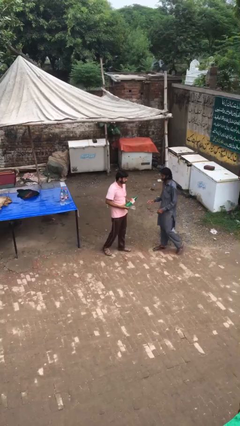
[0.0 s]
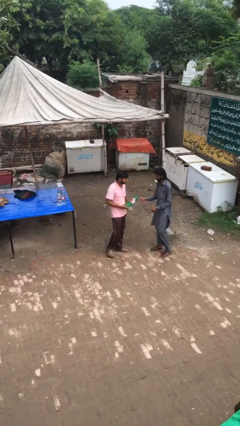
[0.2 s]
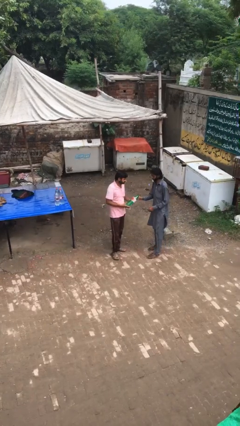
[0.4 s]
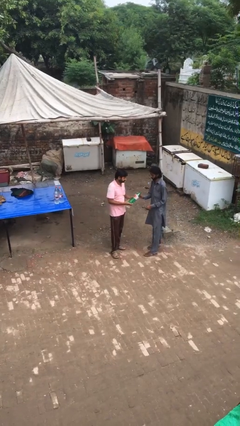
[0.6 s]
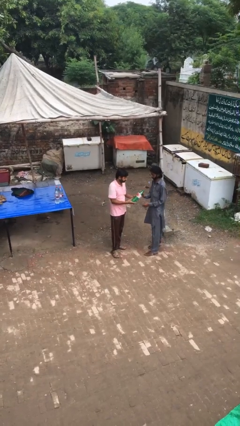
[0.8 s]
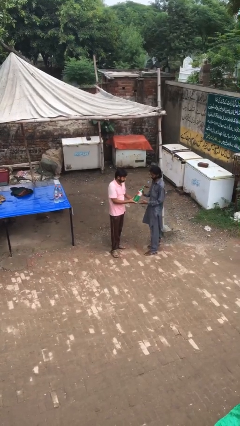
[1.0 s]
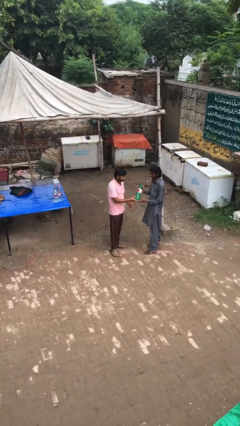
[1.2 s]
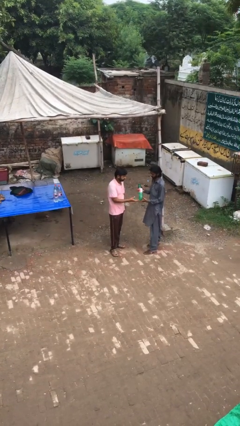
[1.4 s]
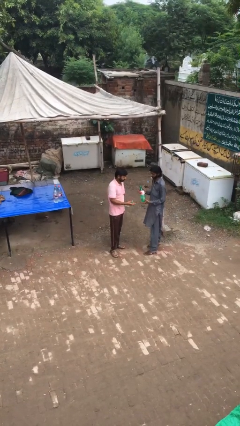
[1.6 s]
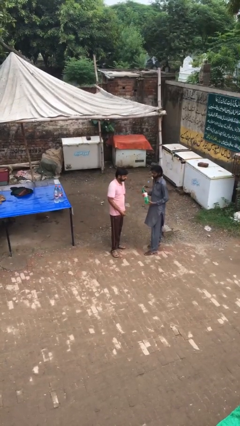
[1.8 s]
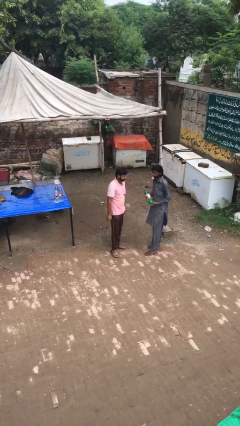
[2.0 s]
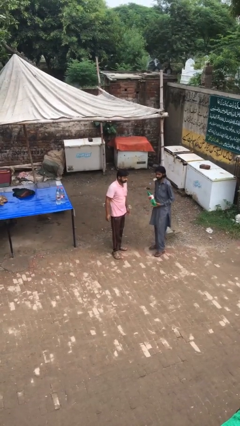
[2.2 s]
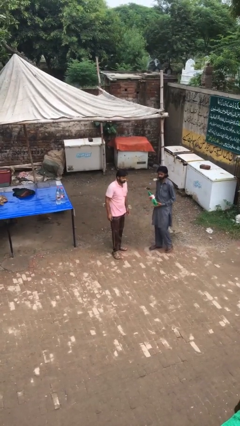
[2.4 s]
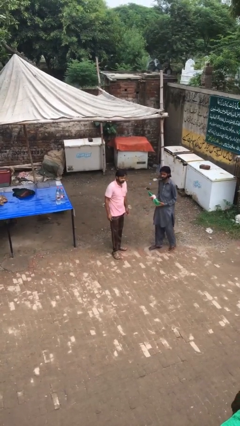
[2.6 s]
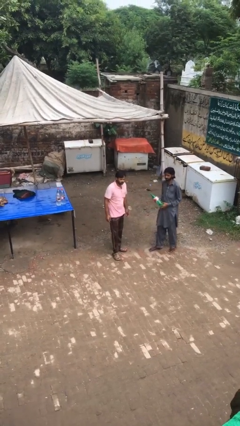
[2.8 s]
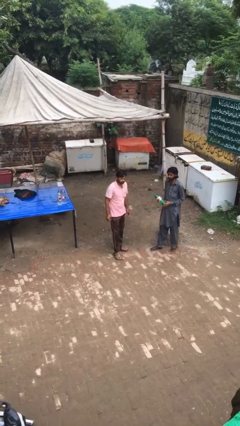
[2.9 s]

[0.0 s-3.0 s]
person transfers object to person

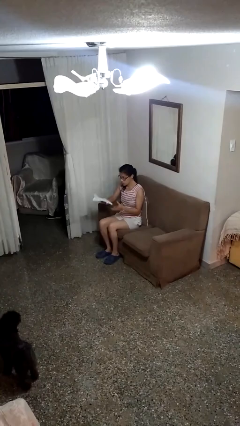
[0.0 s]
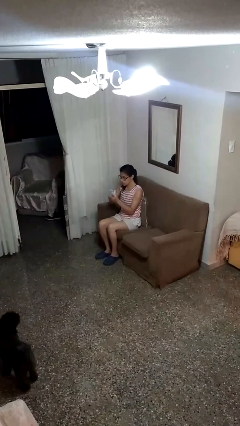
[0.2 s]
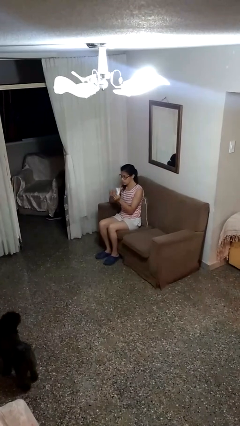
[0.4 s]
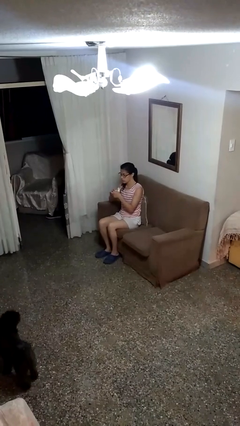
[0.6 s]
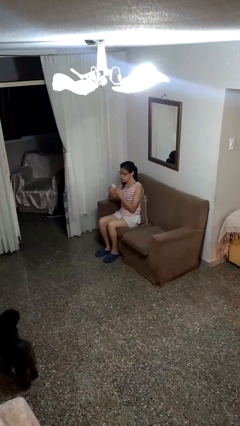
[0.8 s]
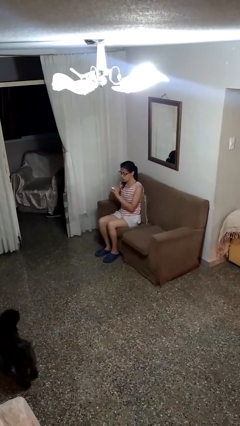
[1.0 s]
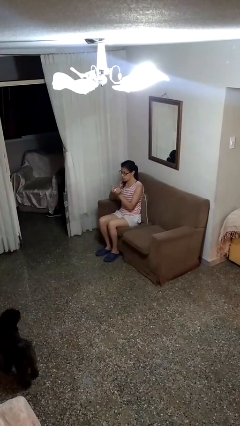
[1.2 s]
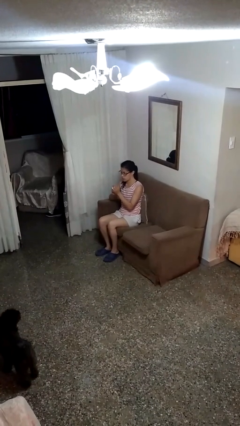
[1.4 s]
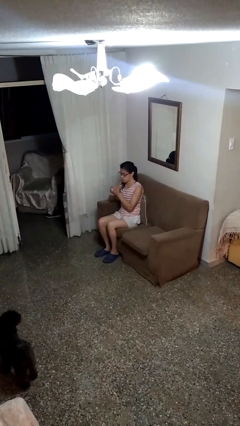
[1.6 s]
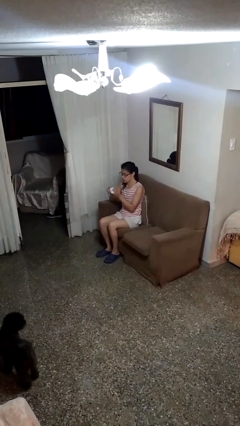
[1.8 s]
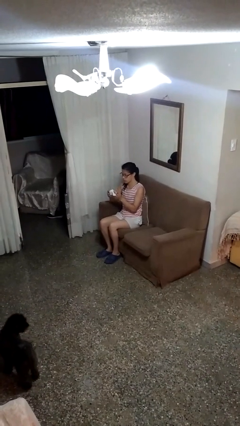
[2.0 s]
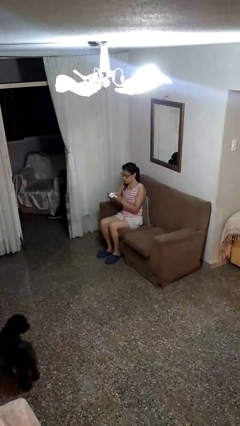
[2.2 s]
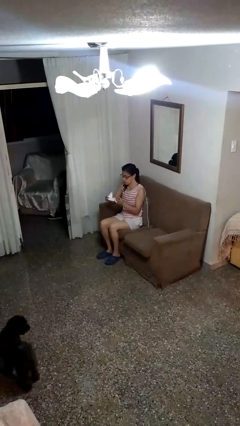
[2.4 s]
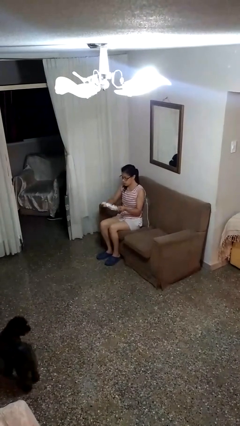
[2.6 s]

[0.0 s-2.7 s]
person crumples paper

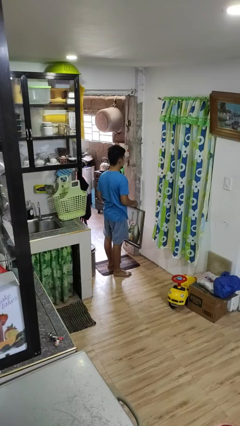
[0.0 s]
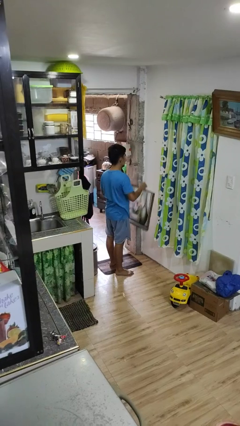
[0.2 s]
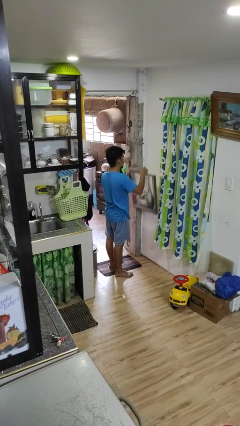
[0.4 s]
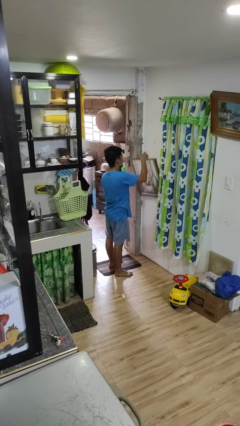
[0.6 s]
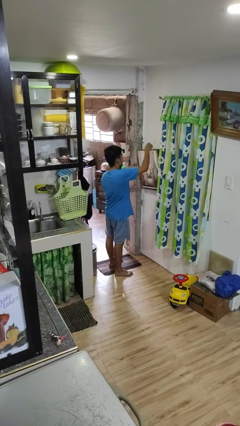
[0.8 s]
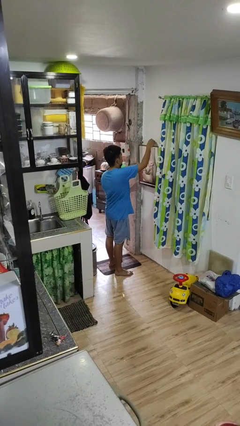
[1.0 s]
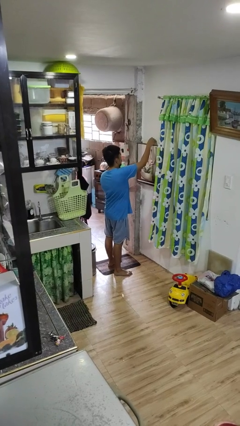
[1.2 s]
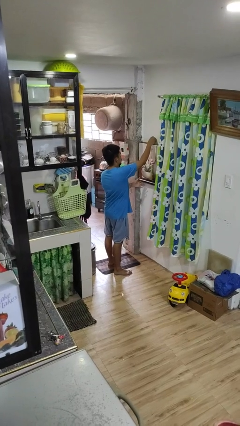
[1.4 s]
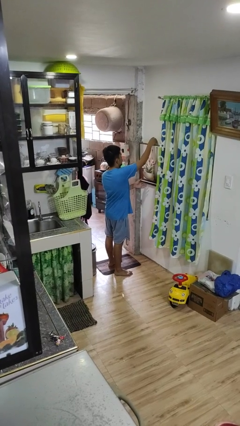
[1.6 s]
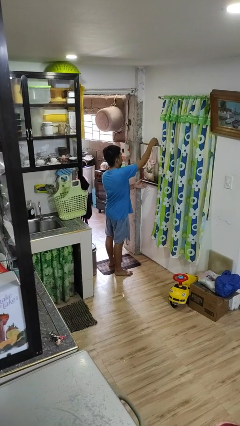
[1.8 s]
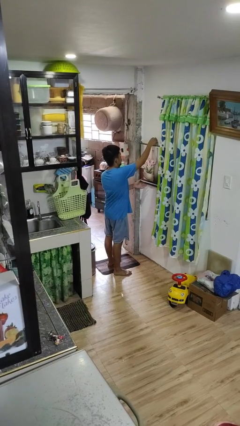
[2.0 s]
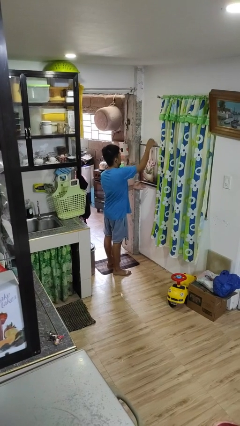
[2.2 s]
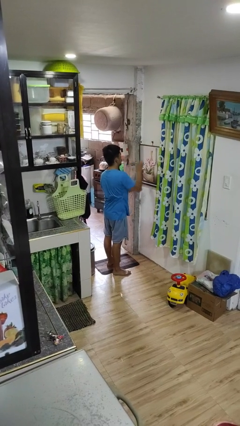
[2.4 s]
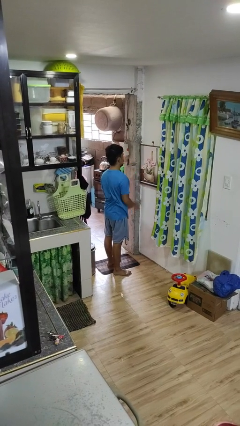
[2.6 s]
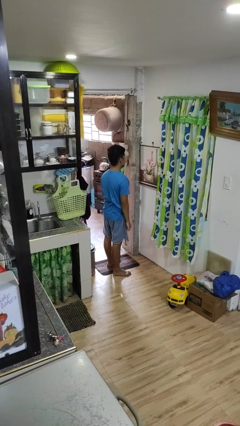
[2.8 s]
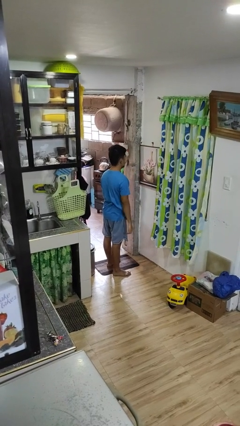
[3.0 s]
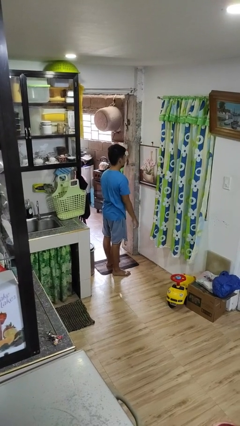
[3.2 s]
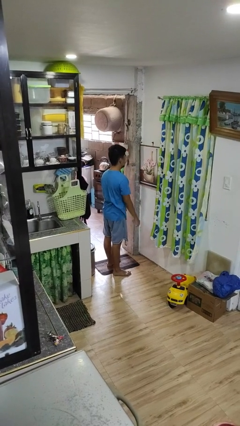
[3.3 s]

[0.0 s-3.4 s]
person puts up picture frame

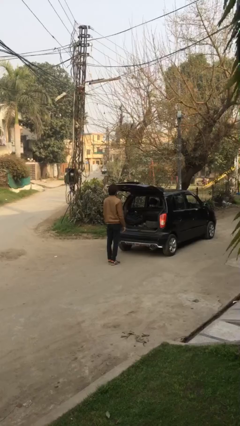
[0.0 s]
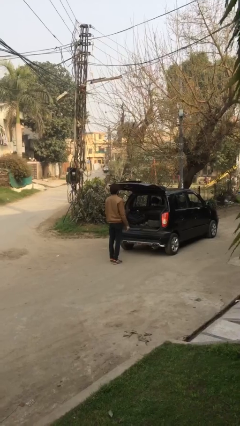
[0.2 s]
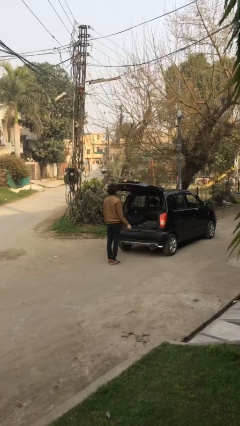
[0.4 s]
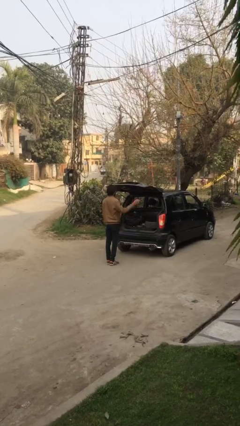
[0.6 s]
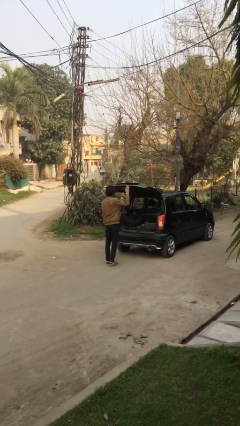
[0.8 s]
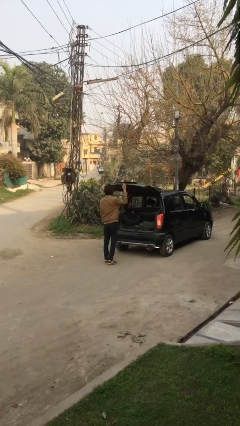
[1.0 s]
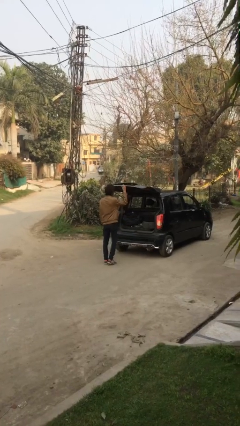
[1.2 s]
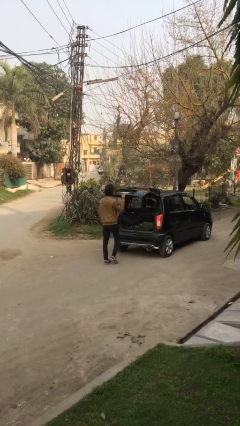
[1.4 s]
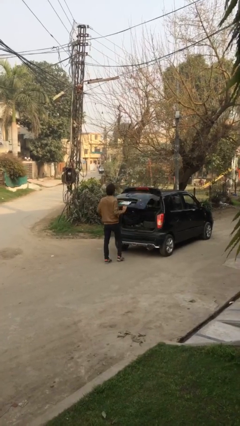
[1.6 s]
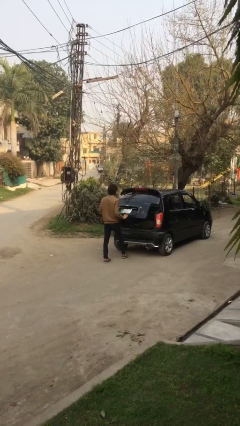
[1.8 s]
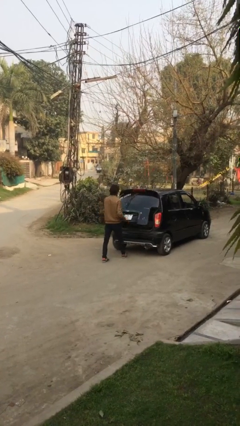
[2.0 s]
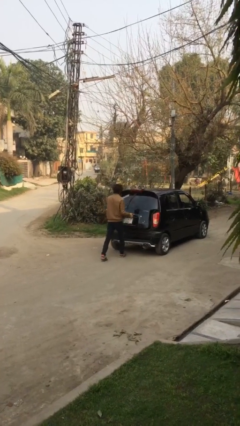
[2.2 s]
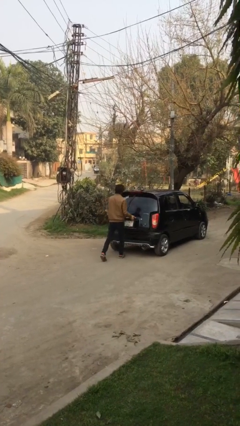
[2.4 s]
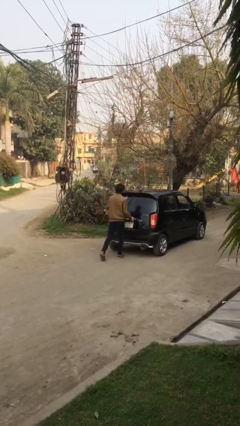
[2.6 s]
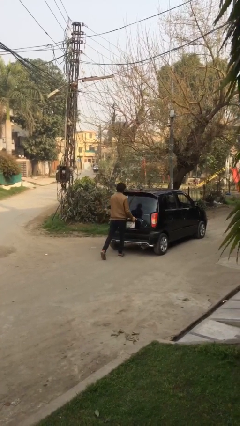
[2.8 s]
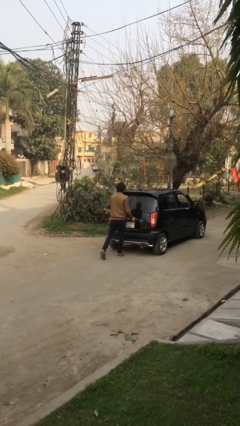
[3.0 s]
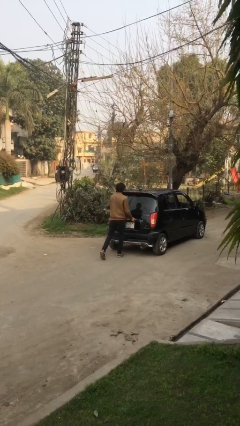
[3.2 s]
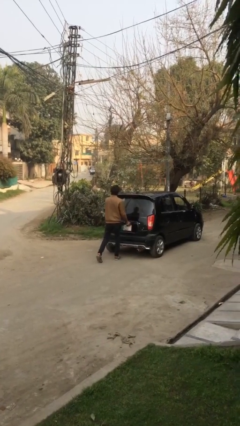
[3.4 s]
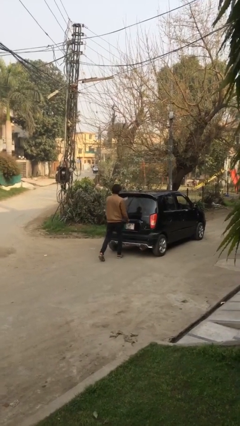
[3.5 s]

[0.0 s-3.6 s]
person closes car trunk

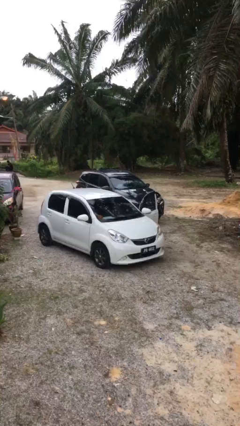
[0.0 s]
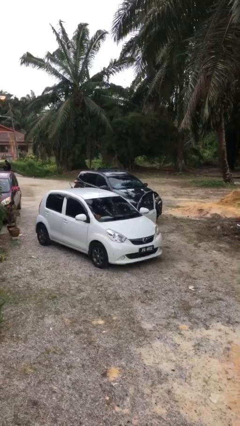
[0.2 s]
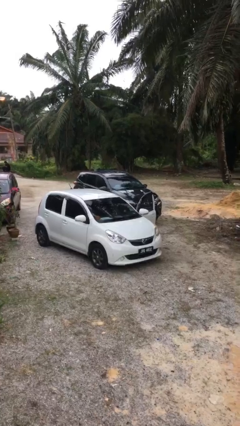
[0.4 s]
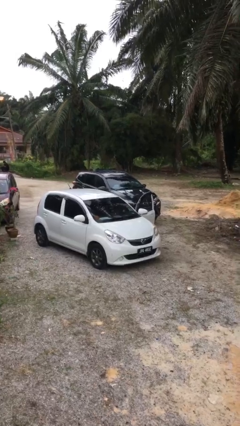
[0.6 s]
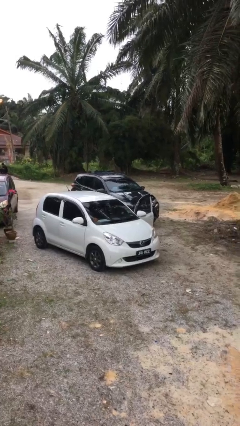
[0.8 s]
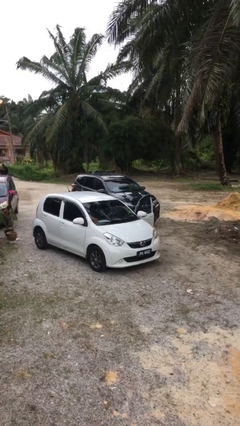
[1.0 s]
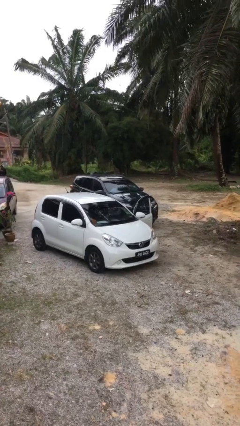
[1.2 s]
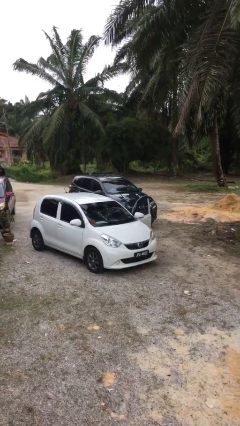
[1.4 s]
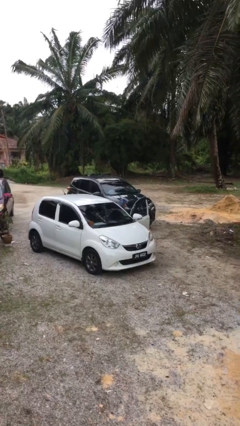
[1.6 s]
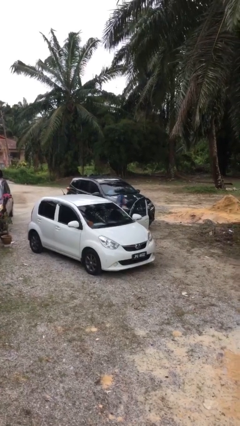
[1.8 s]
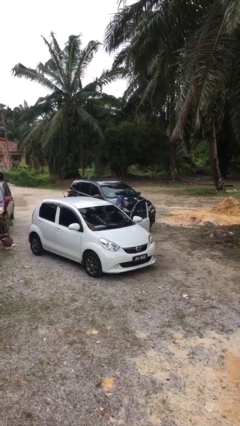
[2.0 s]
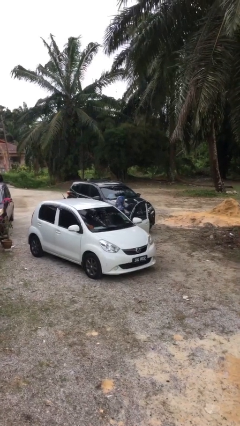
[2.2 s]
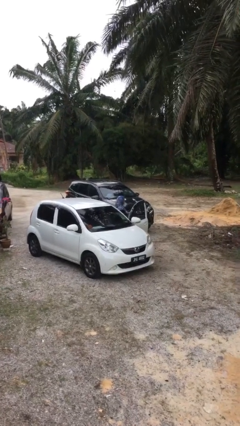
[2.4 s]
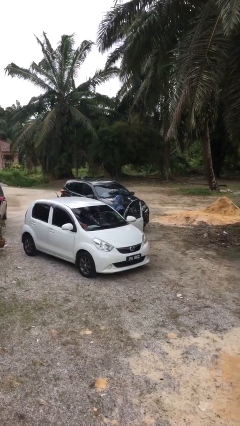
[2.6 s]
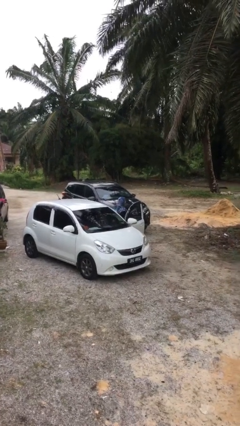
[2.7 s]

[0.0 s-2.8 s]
person exits car

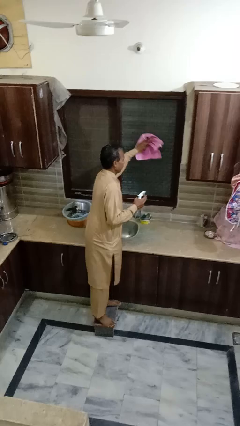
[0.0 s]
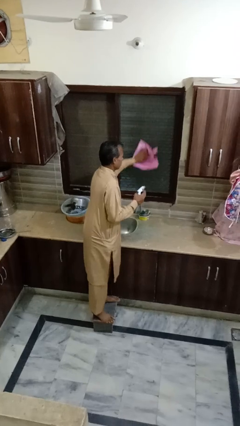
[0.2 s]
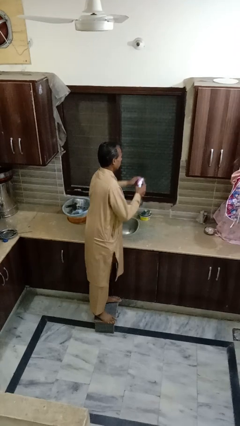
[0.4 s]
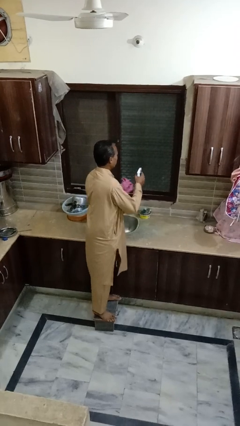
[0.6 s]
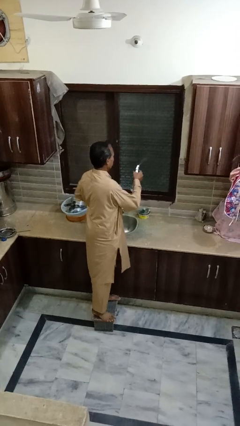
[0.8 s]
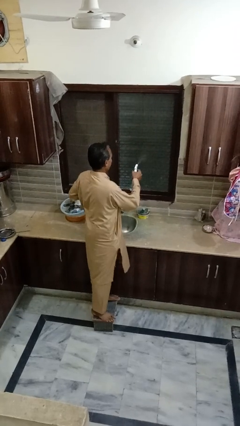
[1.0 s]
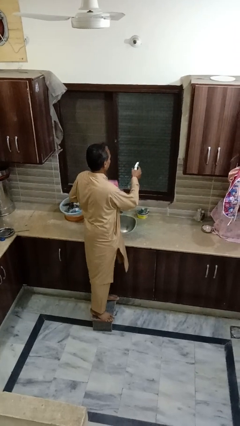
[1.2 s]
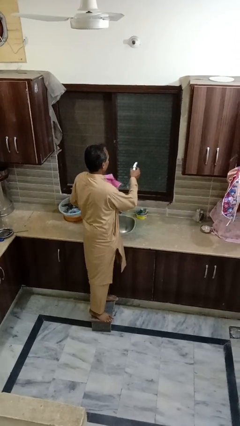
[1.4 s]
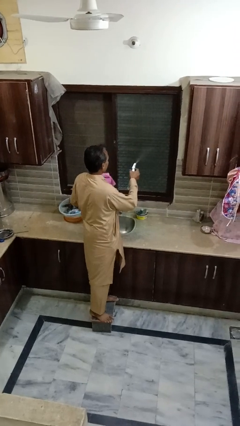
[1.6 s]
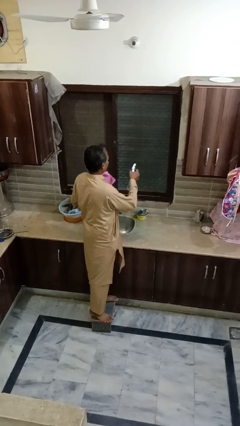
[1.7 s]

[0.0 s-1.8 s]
person sprays from bottle

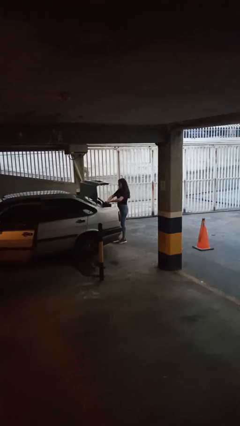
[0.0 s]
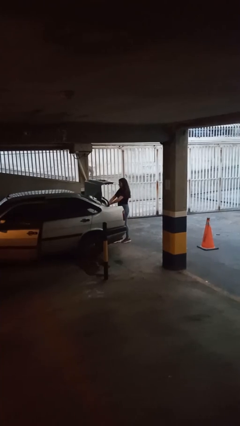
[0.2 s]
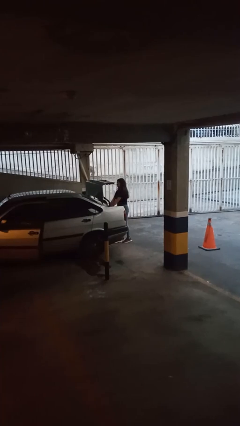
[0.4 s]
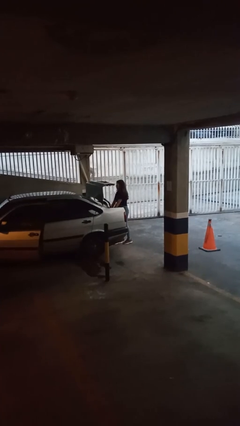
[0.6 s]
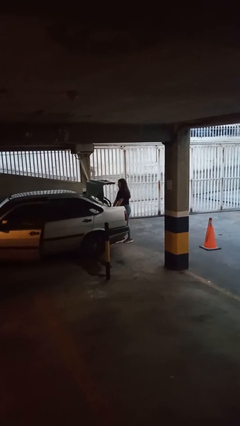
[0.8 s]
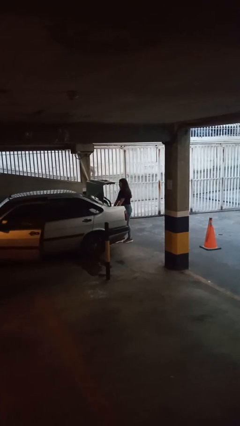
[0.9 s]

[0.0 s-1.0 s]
person loads car
